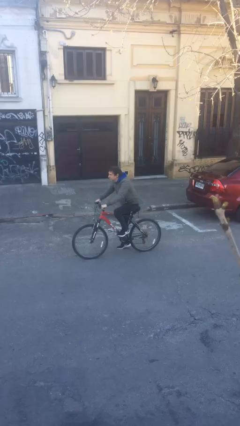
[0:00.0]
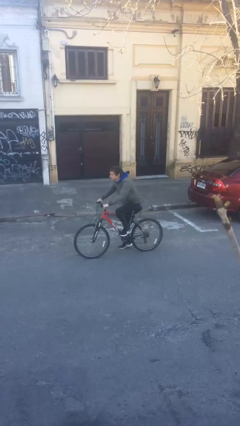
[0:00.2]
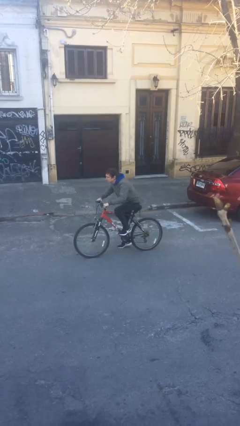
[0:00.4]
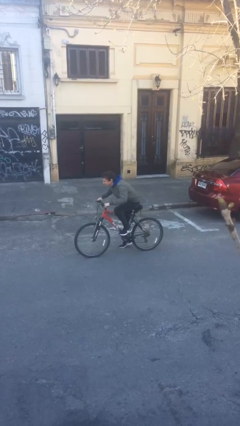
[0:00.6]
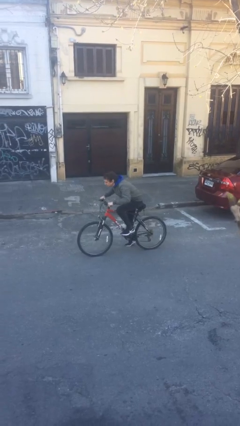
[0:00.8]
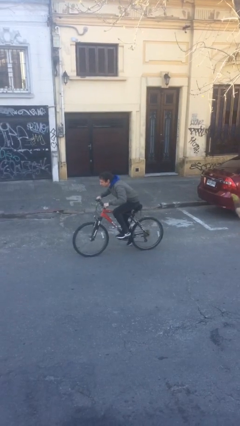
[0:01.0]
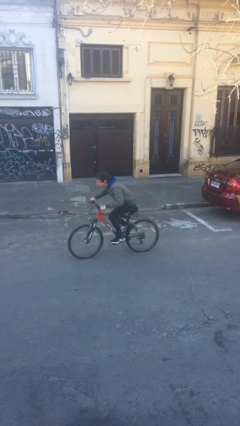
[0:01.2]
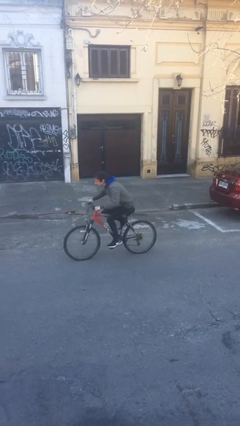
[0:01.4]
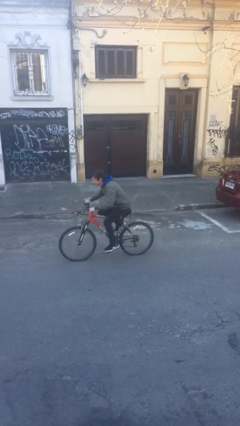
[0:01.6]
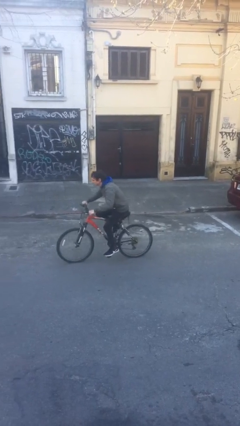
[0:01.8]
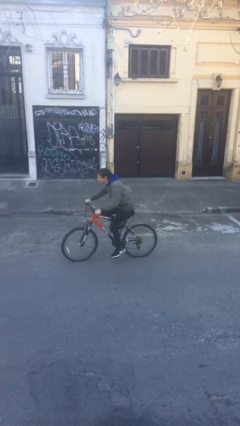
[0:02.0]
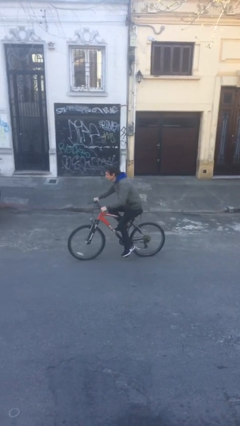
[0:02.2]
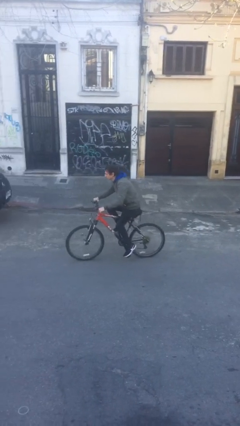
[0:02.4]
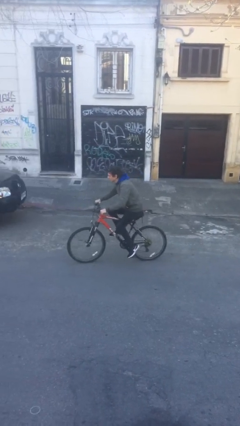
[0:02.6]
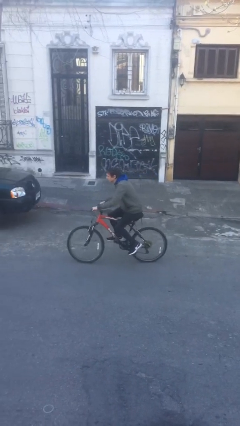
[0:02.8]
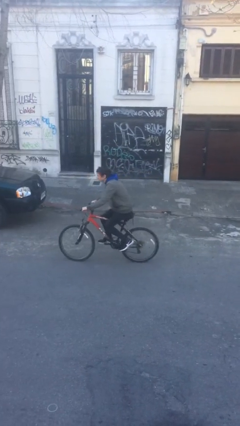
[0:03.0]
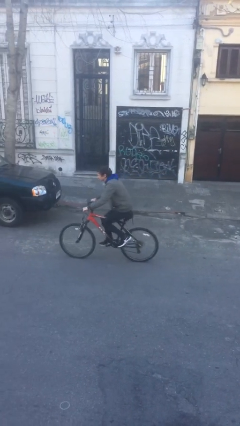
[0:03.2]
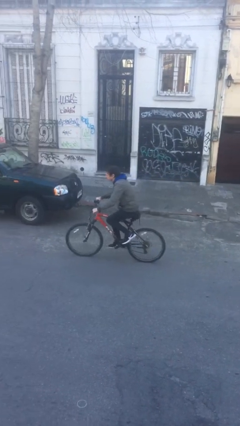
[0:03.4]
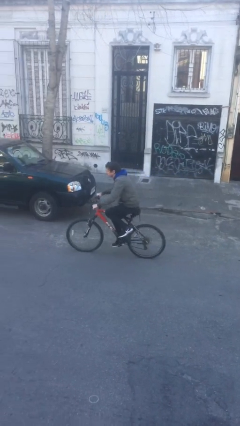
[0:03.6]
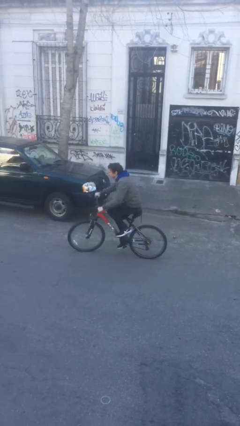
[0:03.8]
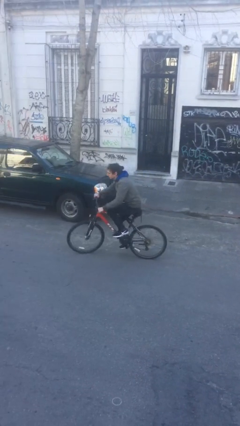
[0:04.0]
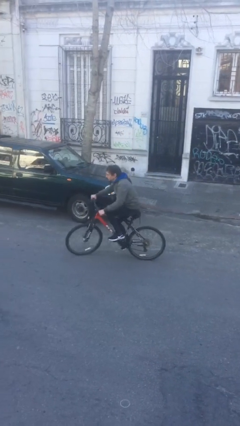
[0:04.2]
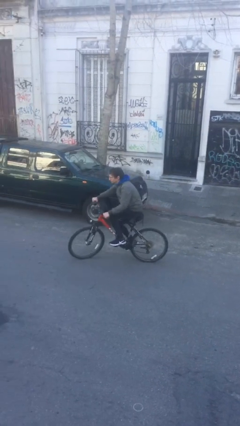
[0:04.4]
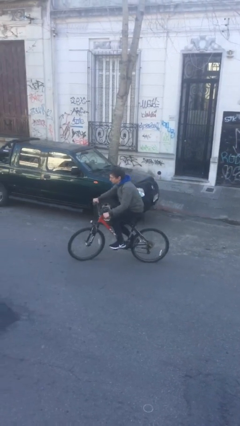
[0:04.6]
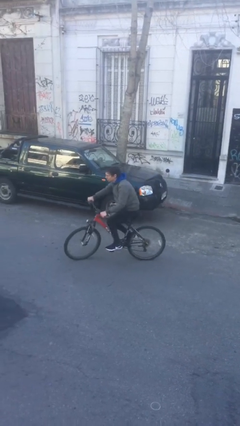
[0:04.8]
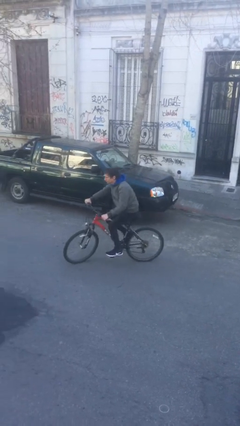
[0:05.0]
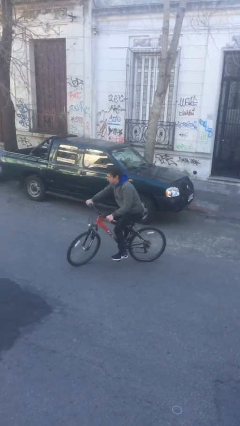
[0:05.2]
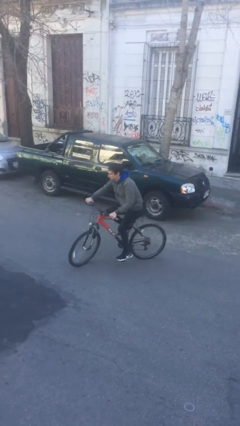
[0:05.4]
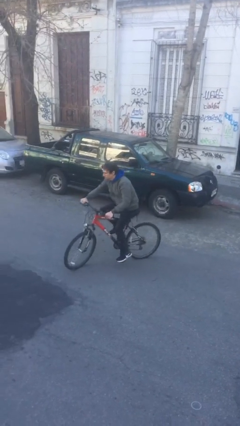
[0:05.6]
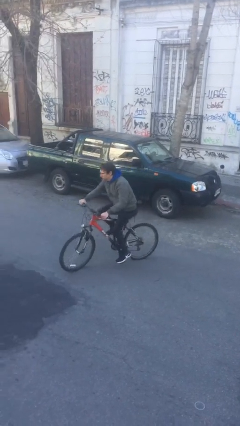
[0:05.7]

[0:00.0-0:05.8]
person rides bicycle

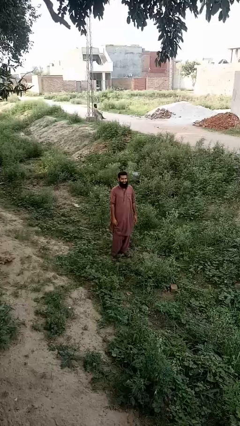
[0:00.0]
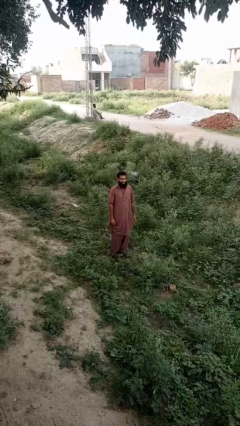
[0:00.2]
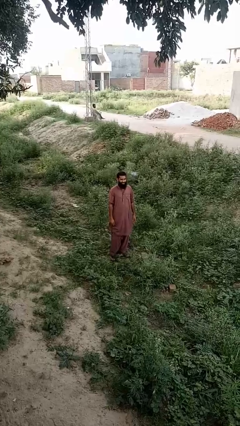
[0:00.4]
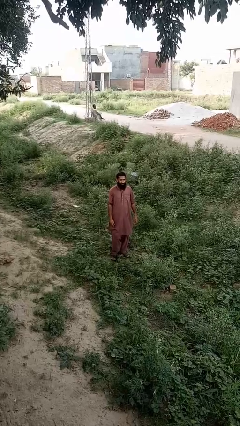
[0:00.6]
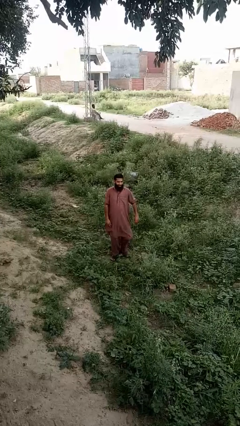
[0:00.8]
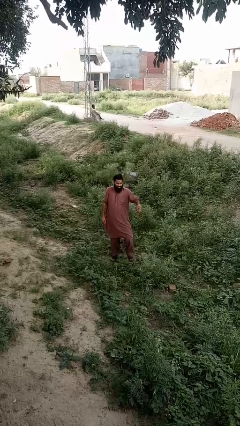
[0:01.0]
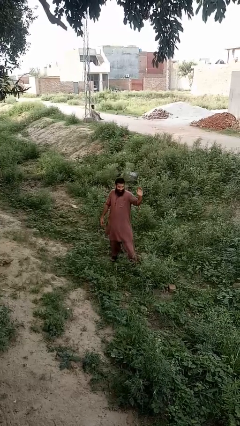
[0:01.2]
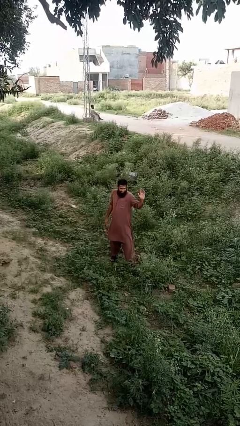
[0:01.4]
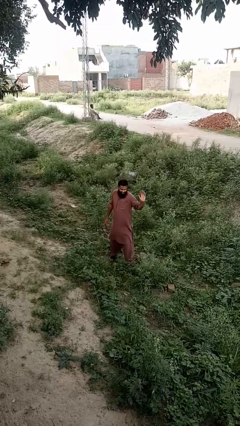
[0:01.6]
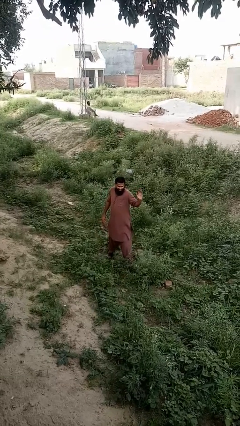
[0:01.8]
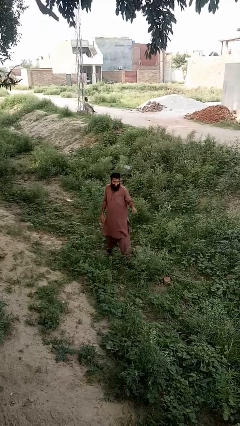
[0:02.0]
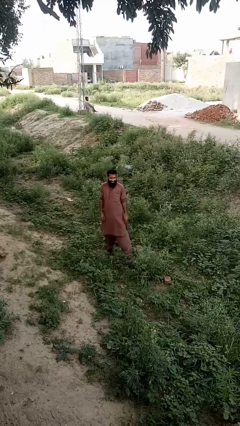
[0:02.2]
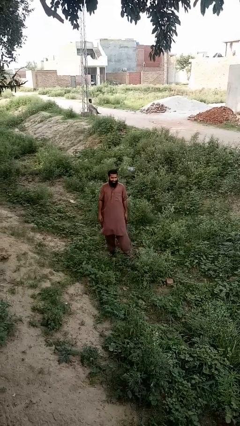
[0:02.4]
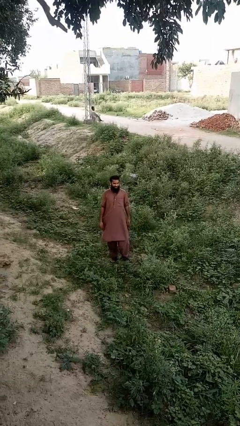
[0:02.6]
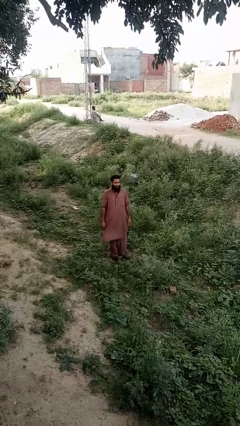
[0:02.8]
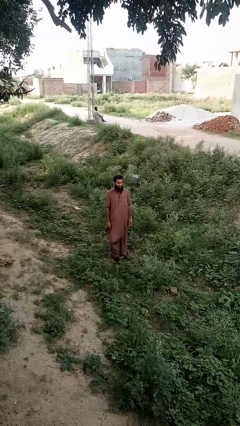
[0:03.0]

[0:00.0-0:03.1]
person dances in place

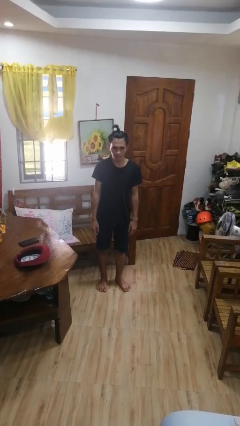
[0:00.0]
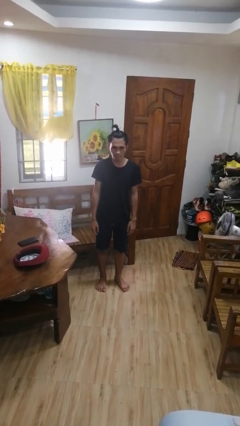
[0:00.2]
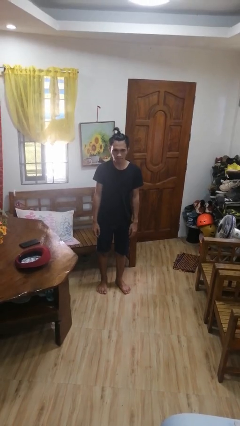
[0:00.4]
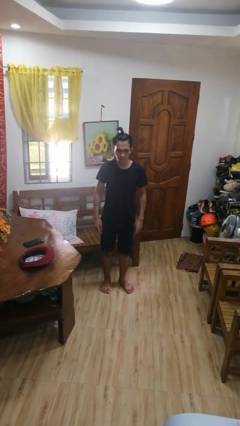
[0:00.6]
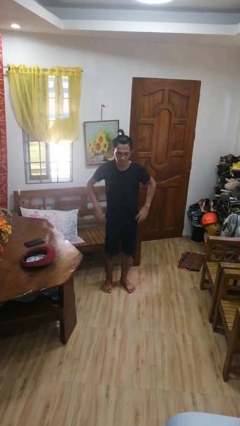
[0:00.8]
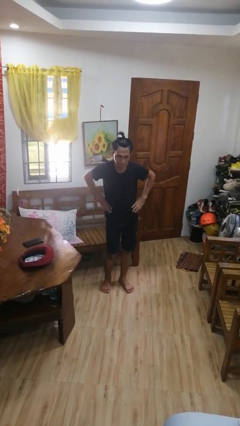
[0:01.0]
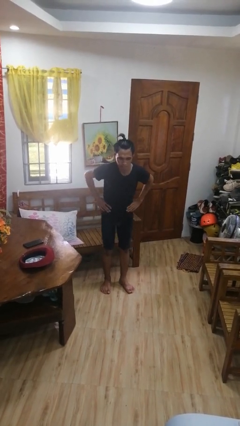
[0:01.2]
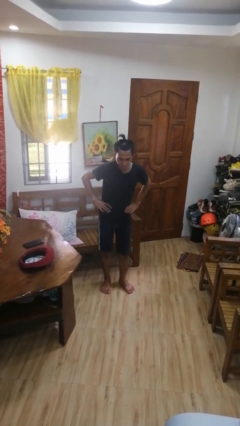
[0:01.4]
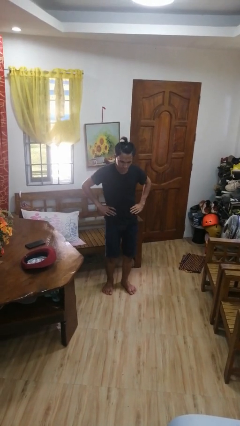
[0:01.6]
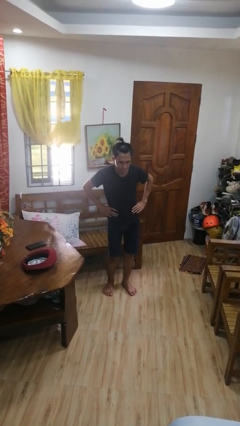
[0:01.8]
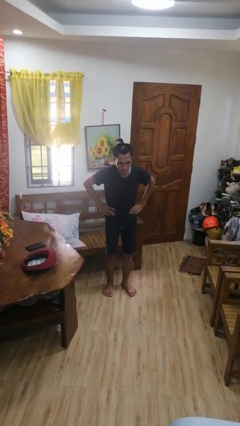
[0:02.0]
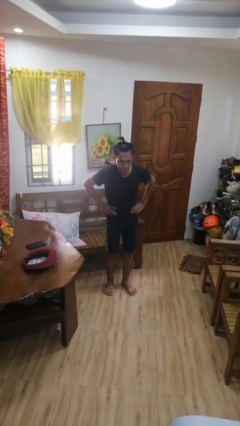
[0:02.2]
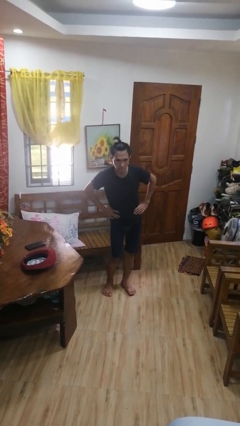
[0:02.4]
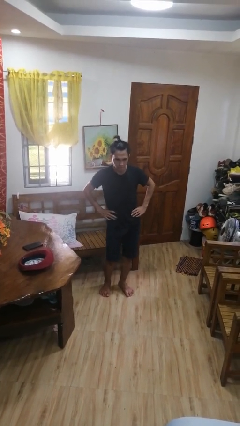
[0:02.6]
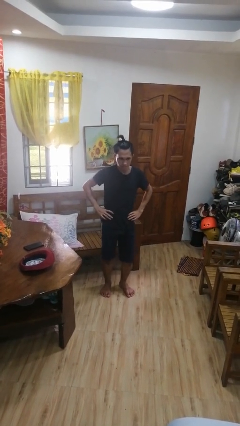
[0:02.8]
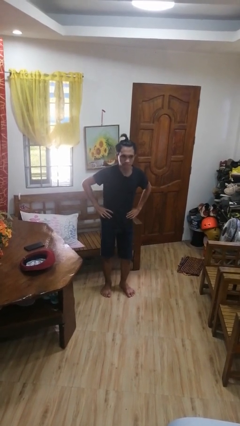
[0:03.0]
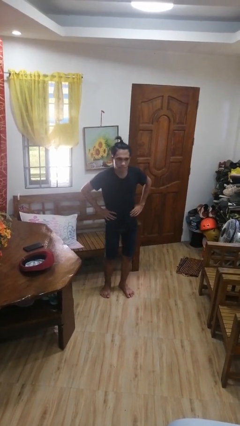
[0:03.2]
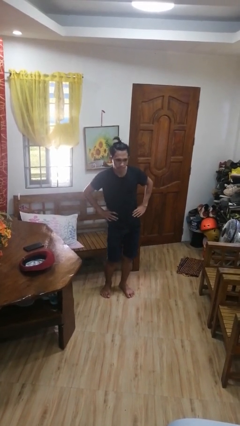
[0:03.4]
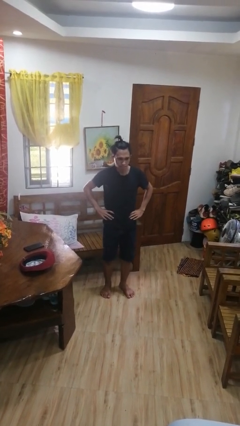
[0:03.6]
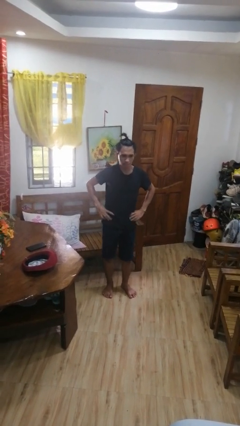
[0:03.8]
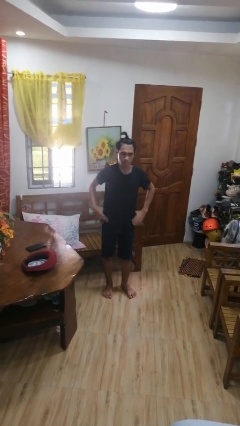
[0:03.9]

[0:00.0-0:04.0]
person wiggles hips

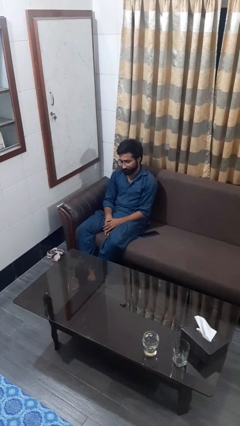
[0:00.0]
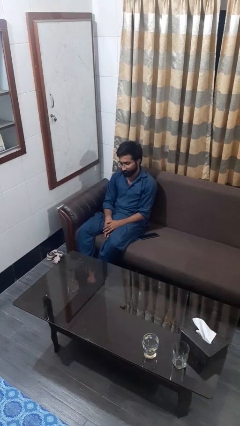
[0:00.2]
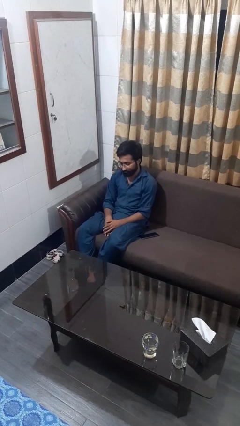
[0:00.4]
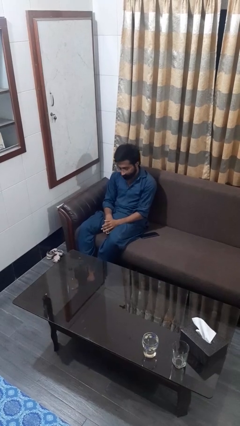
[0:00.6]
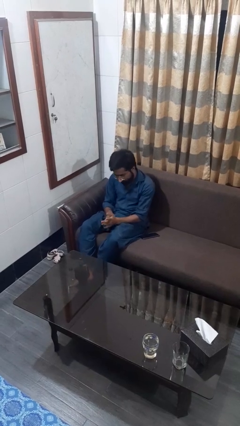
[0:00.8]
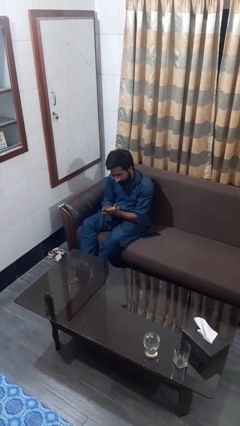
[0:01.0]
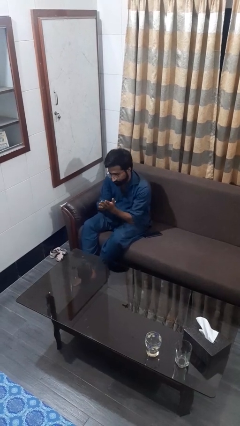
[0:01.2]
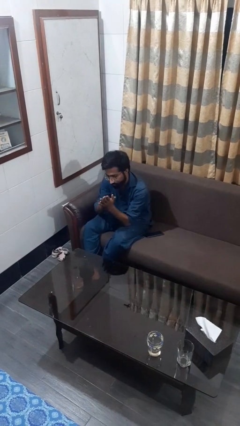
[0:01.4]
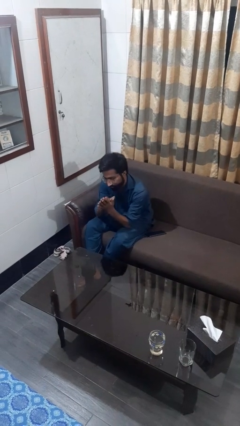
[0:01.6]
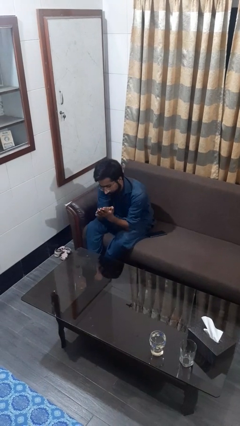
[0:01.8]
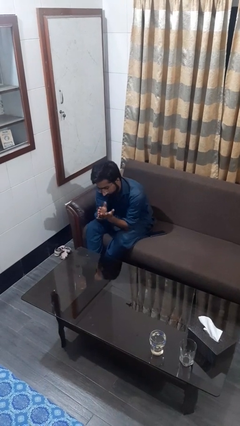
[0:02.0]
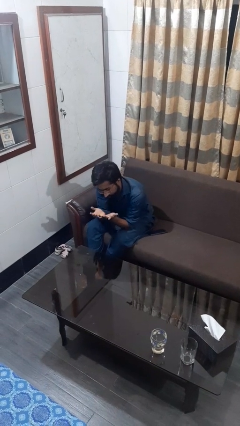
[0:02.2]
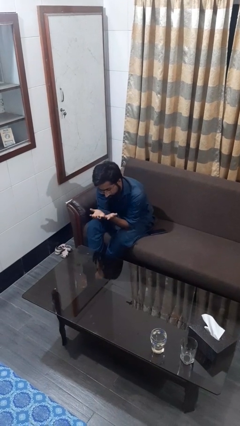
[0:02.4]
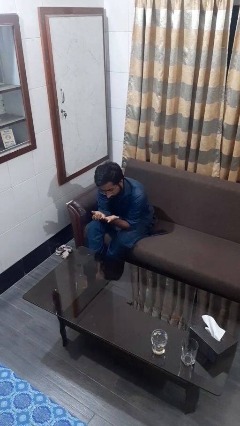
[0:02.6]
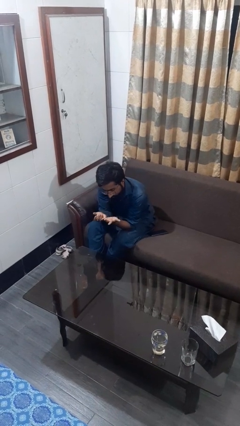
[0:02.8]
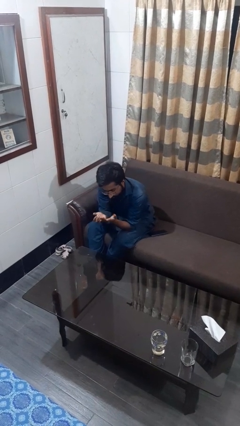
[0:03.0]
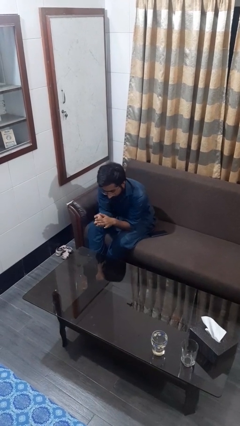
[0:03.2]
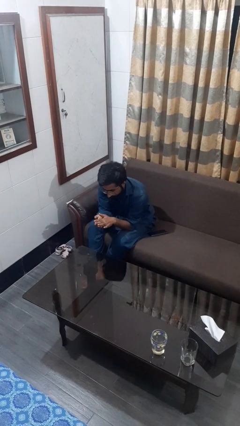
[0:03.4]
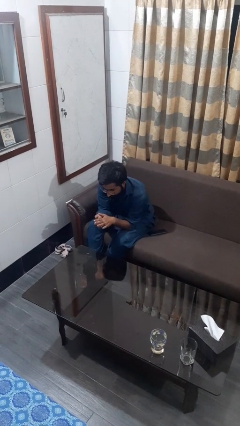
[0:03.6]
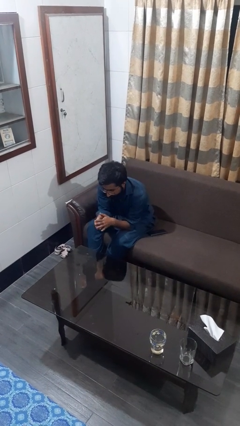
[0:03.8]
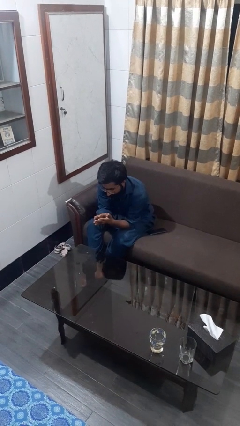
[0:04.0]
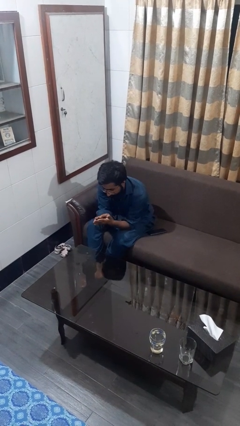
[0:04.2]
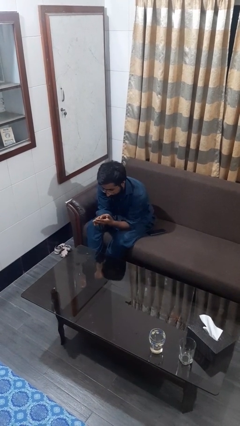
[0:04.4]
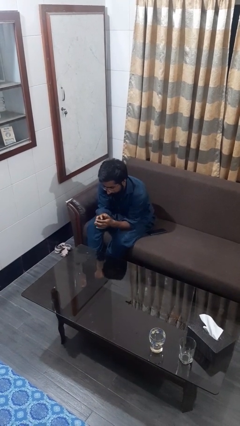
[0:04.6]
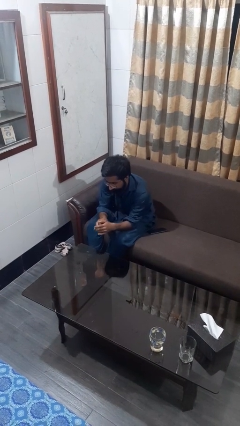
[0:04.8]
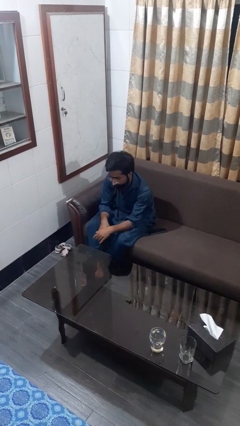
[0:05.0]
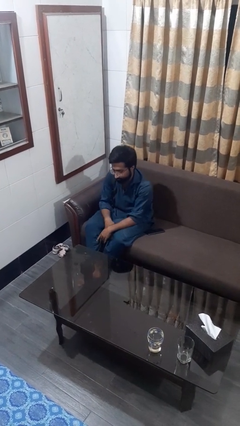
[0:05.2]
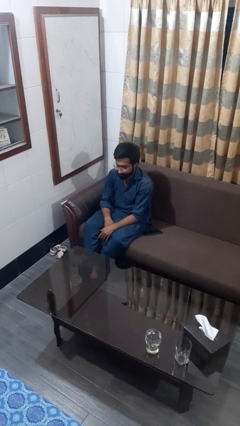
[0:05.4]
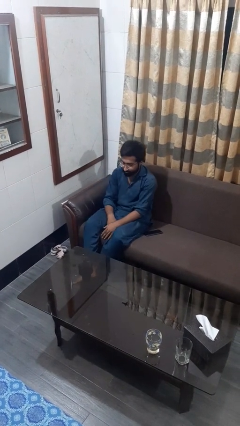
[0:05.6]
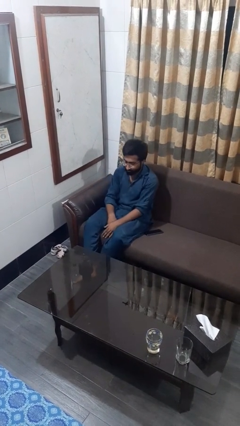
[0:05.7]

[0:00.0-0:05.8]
person looks at hands in lap
